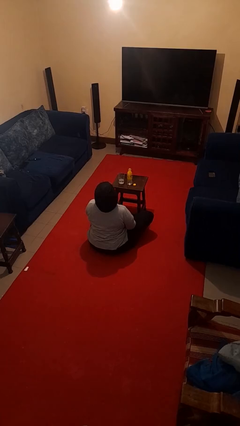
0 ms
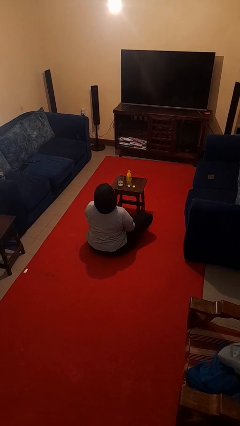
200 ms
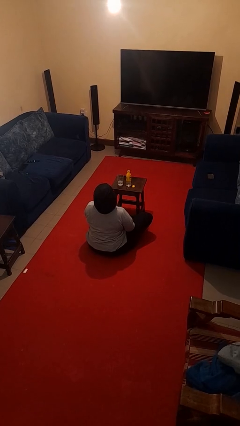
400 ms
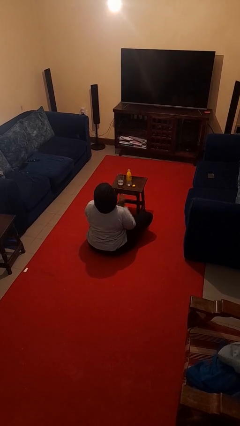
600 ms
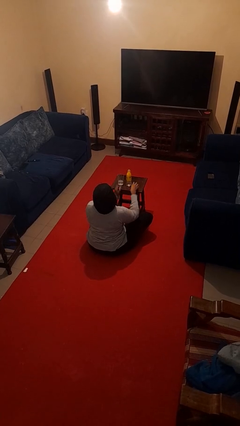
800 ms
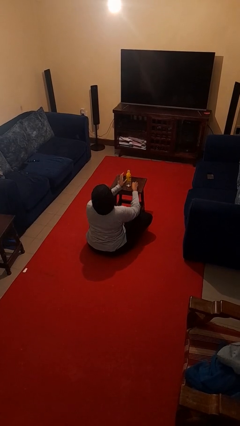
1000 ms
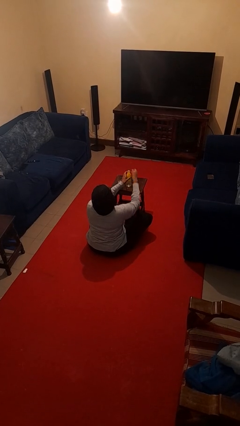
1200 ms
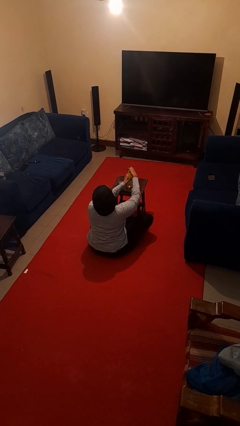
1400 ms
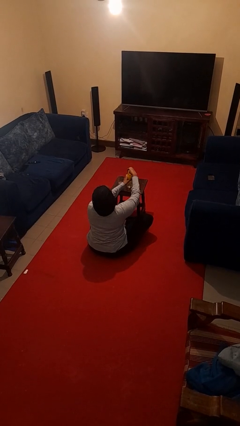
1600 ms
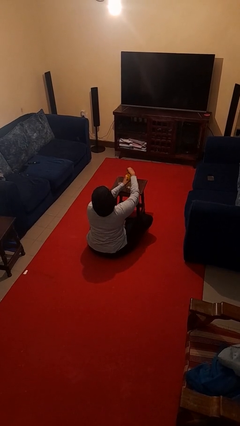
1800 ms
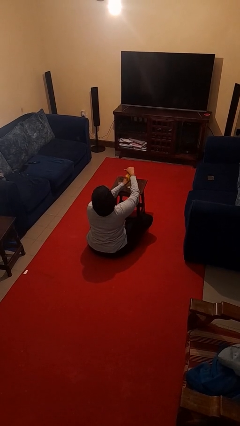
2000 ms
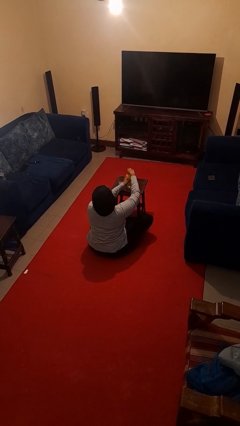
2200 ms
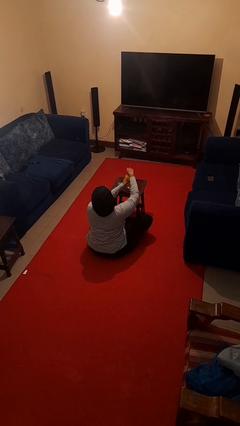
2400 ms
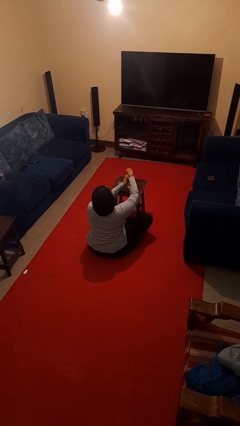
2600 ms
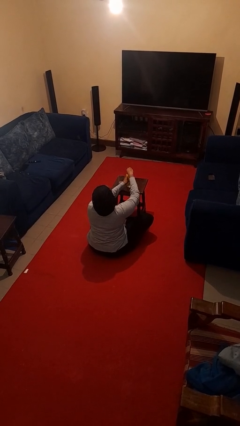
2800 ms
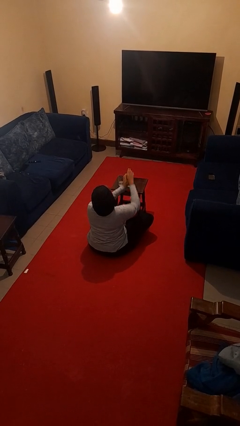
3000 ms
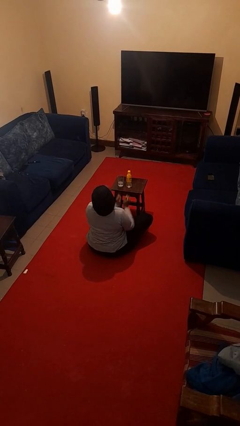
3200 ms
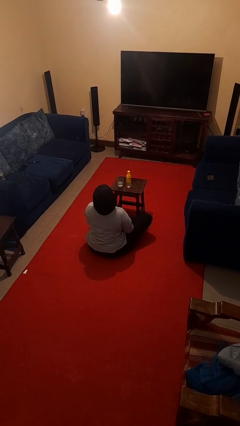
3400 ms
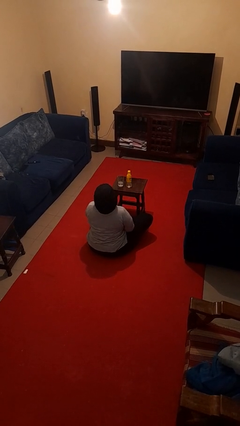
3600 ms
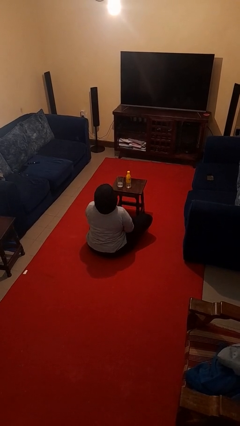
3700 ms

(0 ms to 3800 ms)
person screws lid to bottle

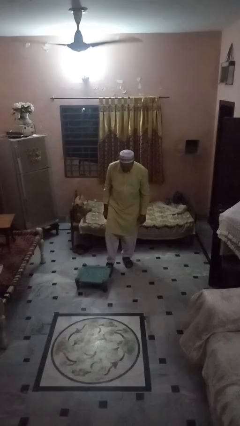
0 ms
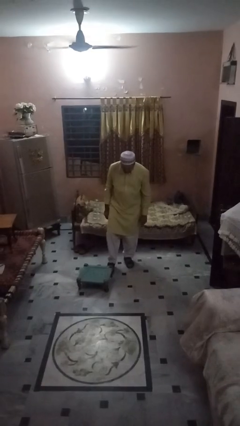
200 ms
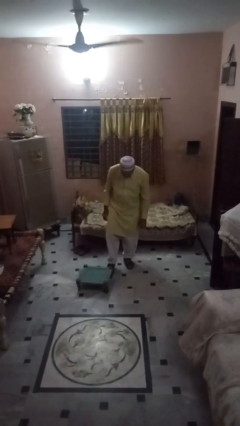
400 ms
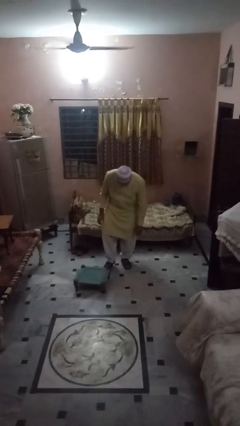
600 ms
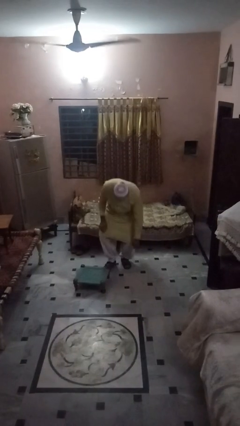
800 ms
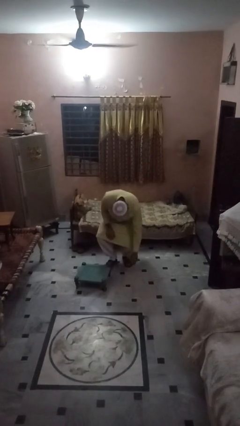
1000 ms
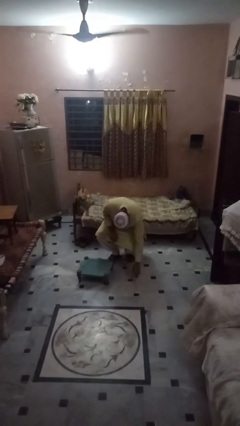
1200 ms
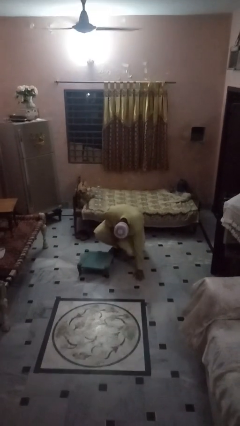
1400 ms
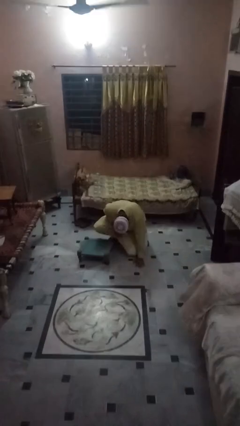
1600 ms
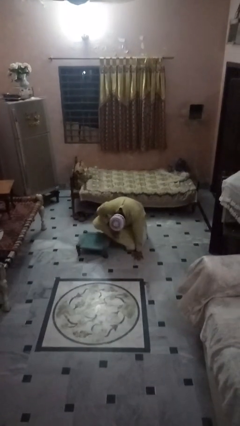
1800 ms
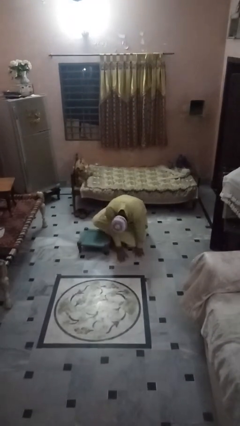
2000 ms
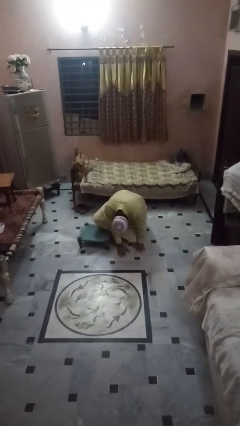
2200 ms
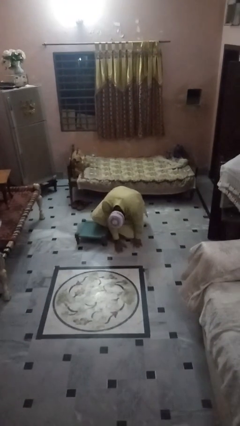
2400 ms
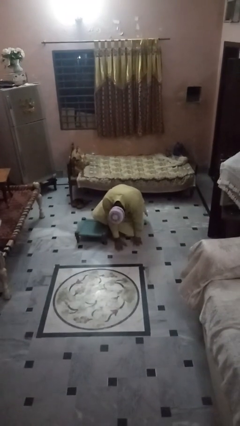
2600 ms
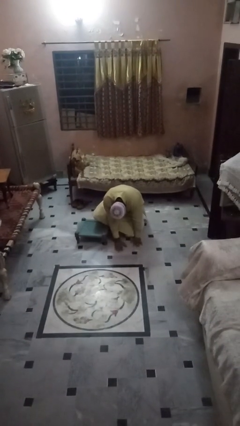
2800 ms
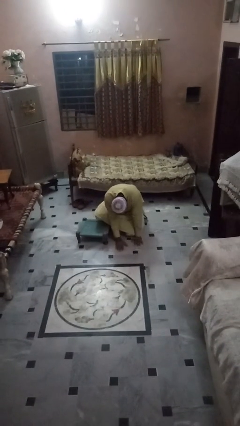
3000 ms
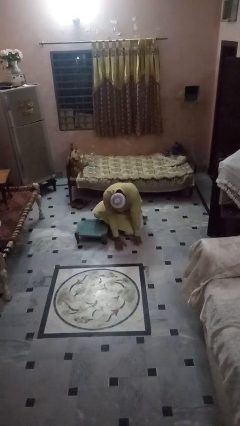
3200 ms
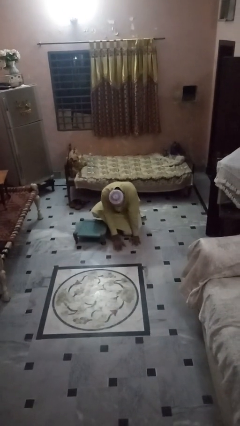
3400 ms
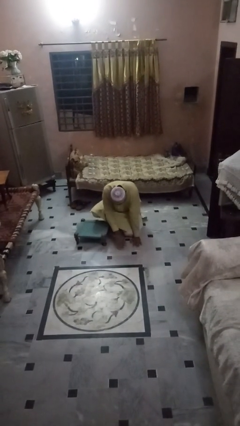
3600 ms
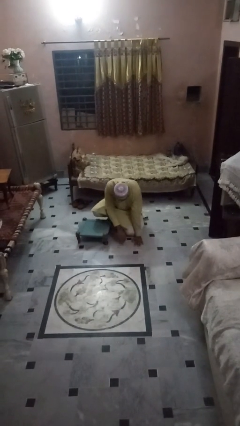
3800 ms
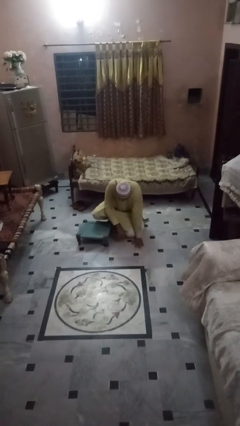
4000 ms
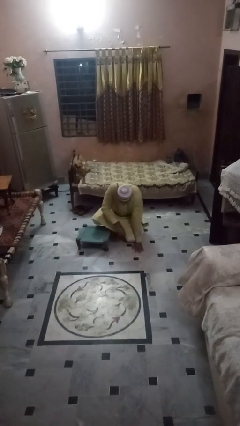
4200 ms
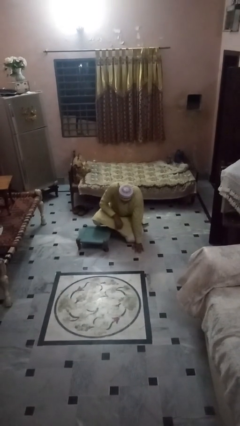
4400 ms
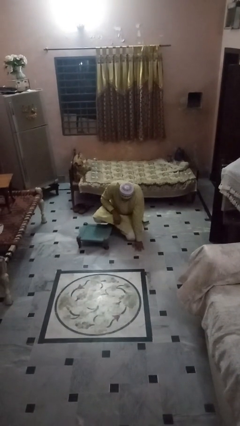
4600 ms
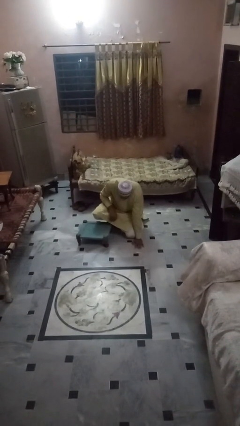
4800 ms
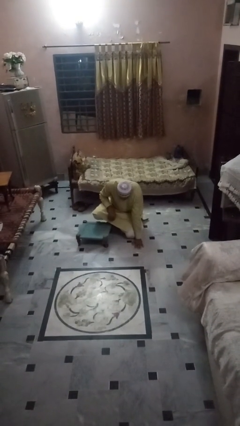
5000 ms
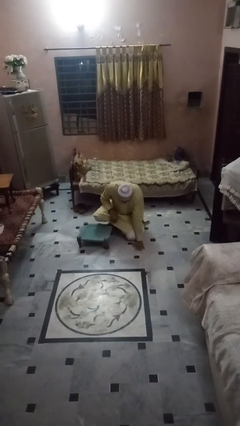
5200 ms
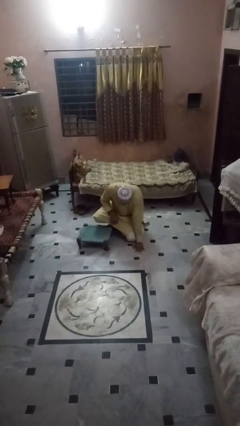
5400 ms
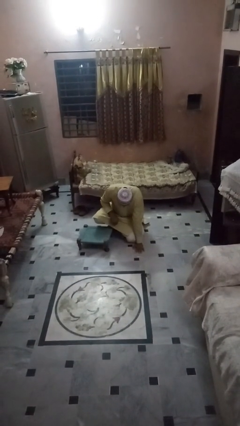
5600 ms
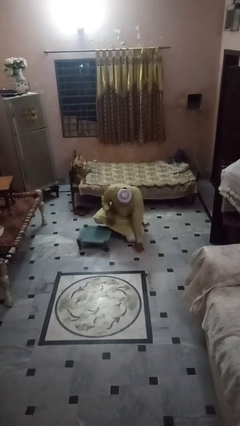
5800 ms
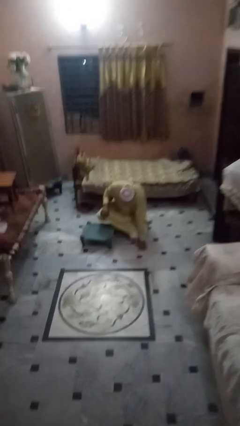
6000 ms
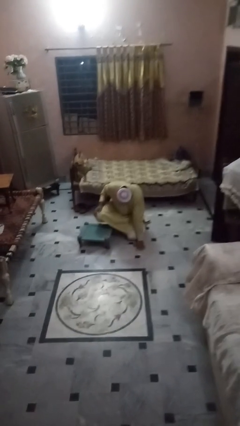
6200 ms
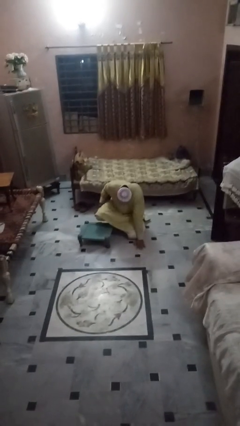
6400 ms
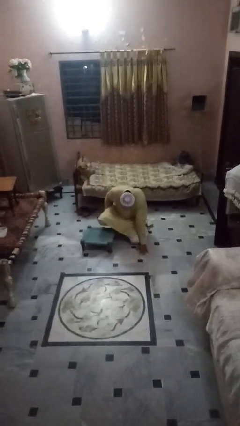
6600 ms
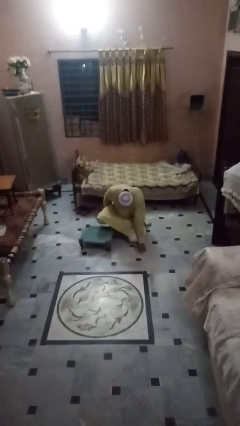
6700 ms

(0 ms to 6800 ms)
person lies down on floor

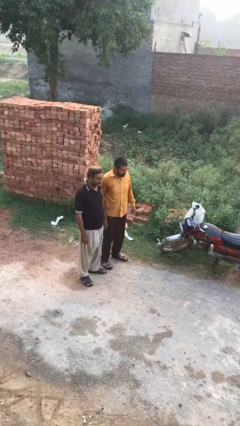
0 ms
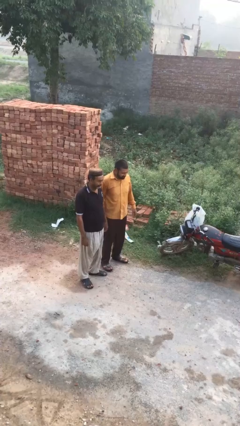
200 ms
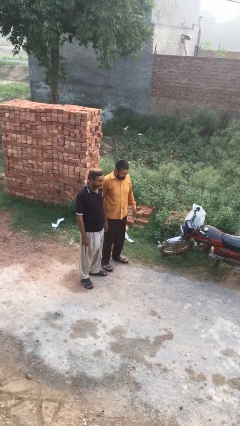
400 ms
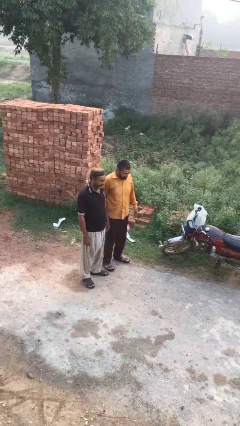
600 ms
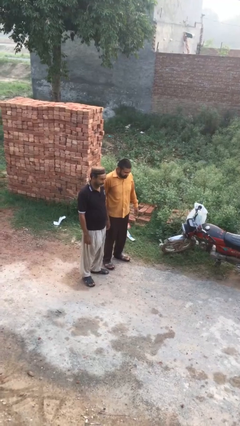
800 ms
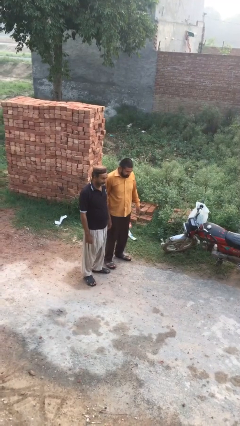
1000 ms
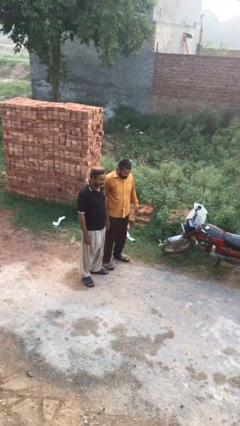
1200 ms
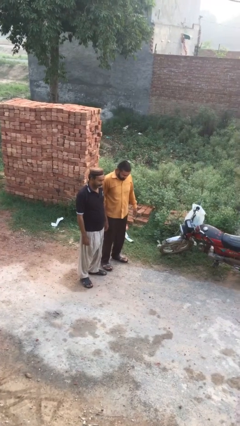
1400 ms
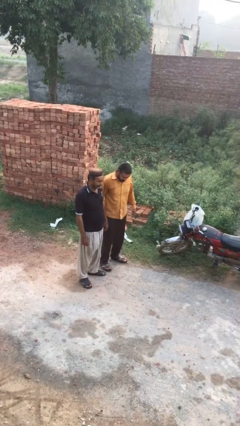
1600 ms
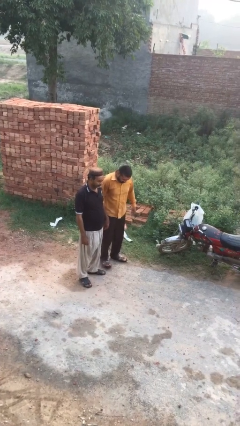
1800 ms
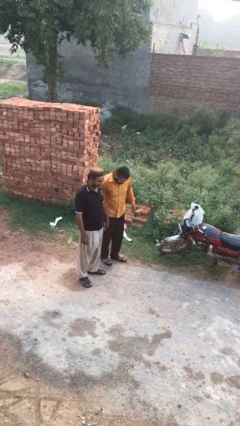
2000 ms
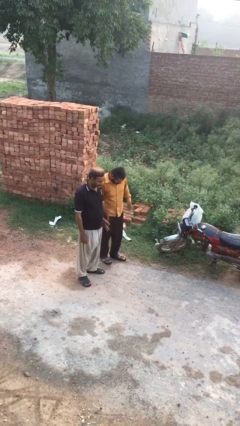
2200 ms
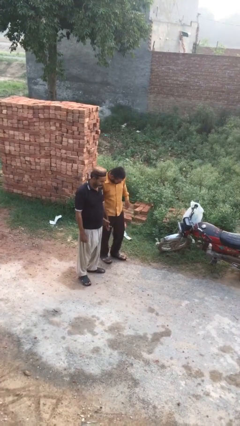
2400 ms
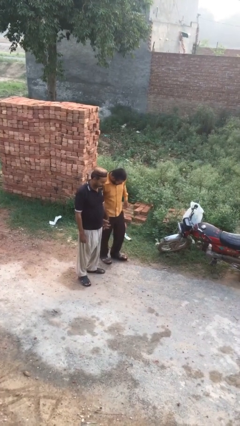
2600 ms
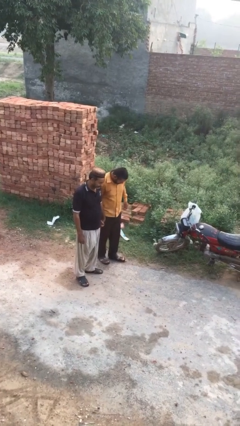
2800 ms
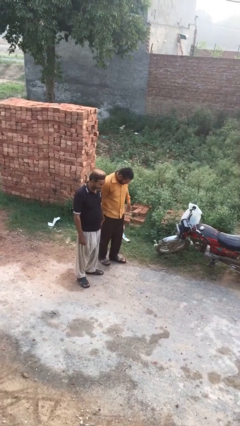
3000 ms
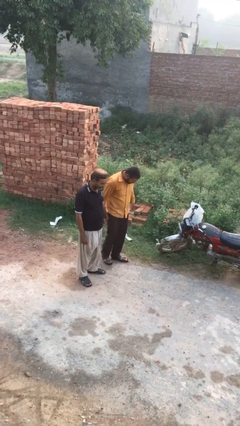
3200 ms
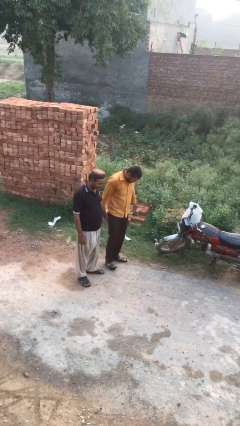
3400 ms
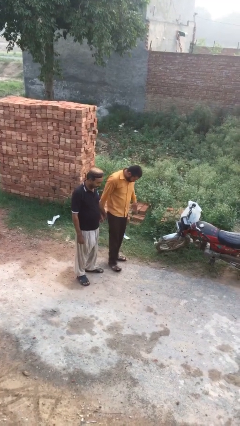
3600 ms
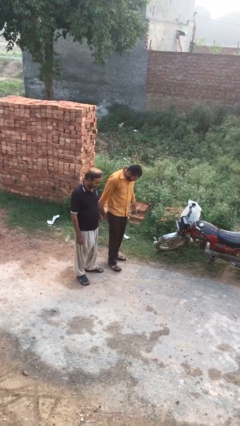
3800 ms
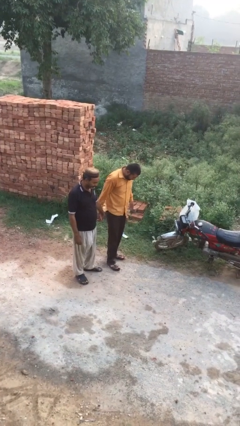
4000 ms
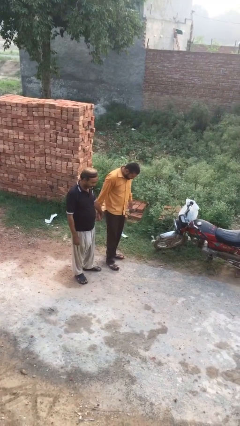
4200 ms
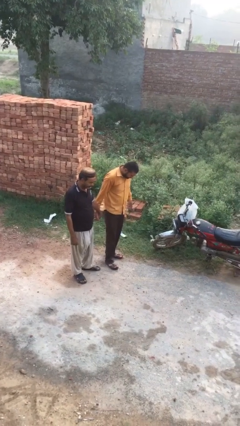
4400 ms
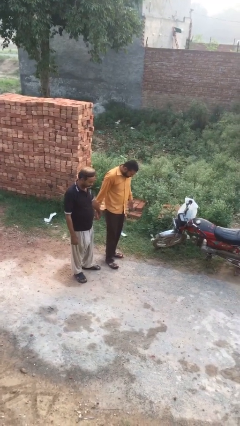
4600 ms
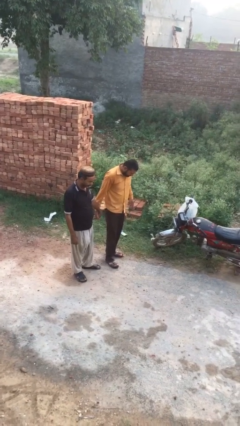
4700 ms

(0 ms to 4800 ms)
person holds hand

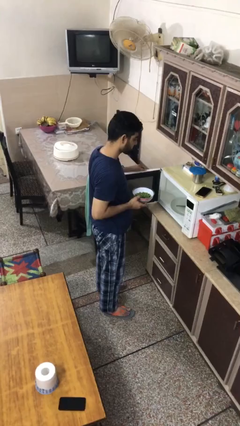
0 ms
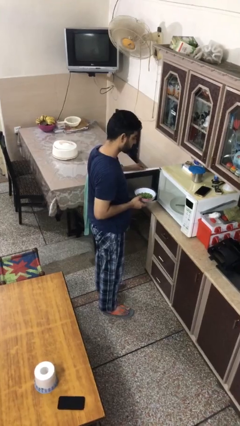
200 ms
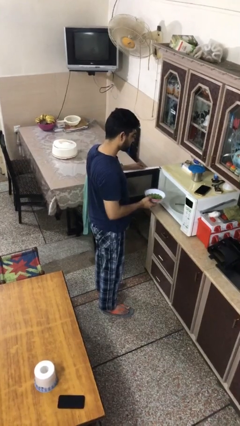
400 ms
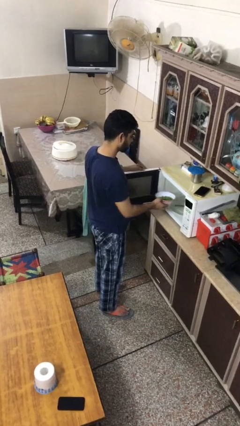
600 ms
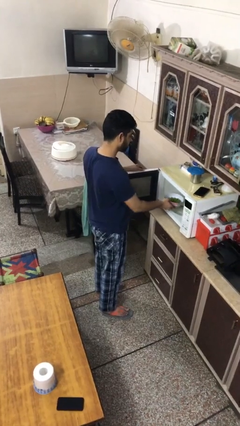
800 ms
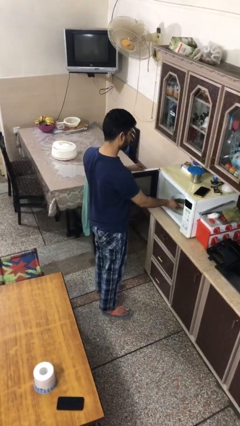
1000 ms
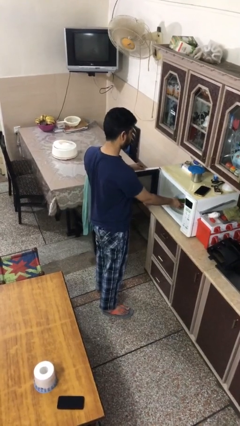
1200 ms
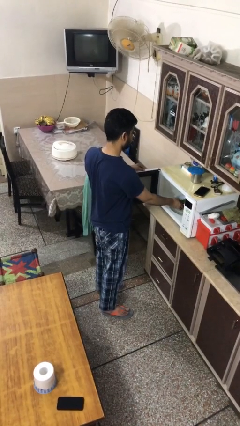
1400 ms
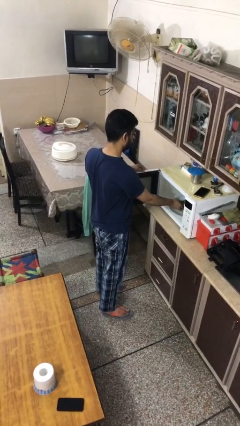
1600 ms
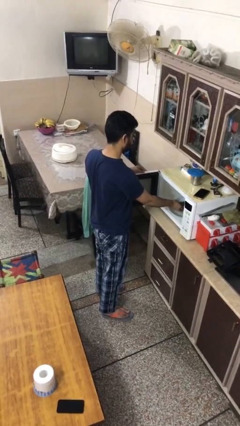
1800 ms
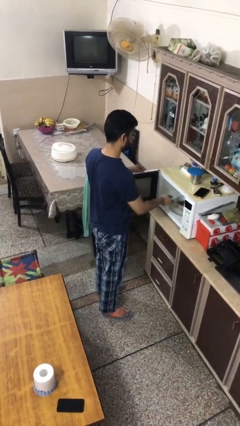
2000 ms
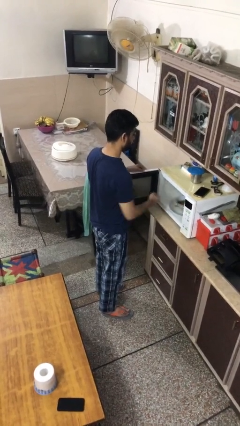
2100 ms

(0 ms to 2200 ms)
person puts object into oven

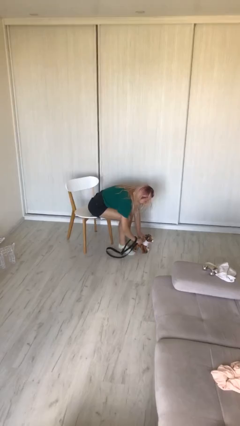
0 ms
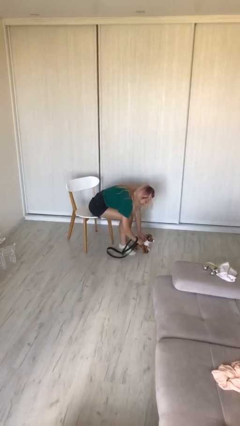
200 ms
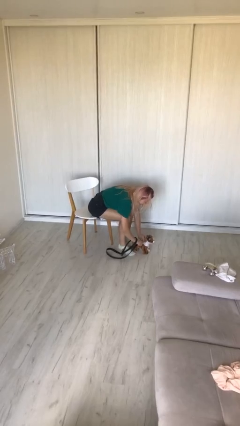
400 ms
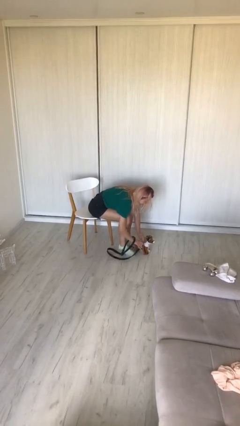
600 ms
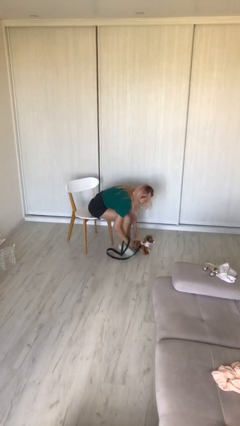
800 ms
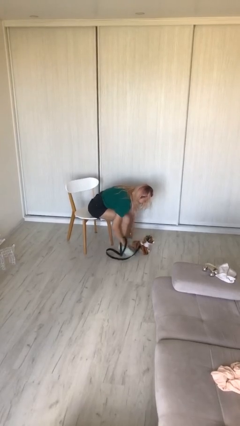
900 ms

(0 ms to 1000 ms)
person attaches leash to dog
